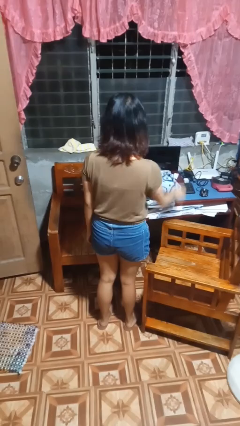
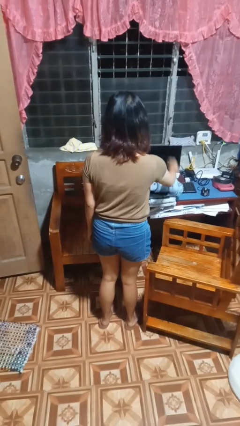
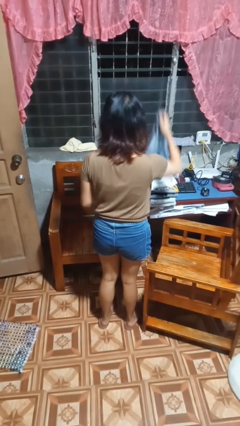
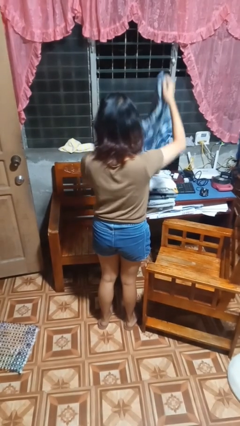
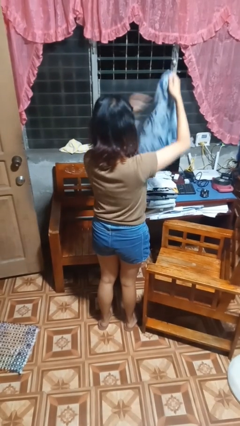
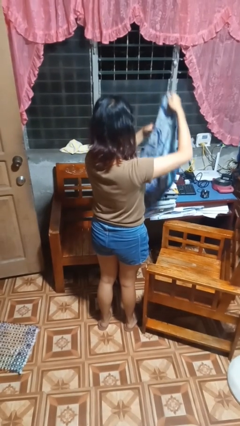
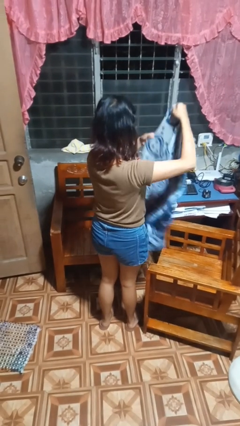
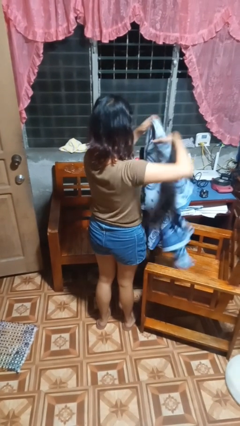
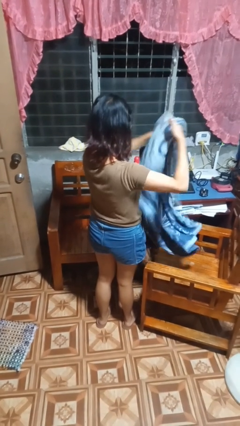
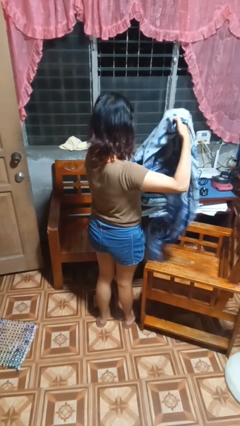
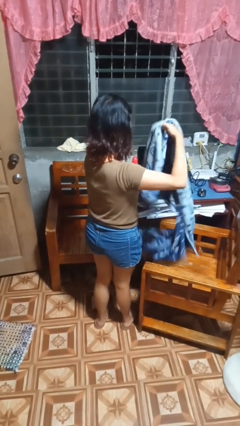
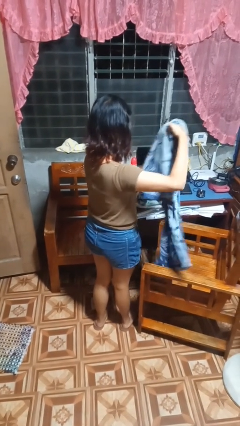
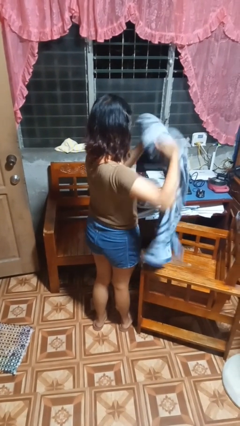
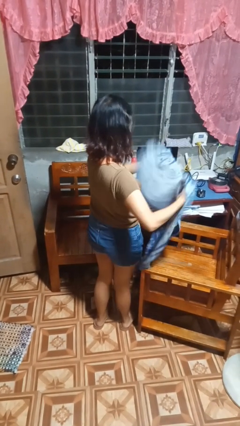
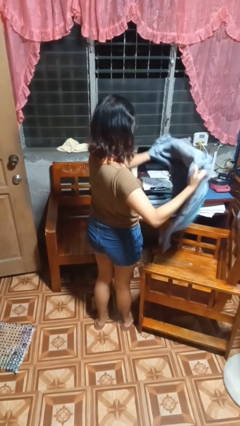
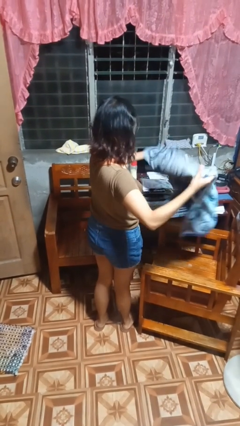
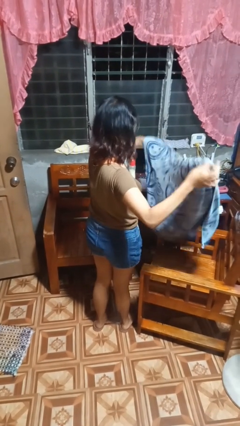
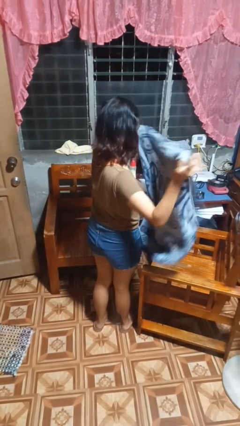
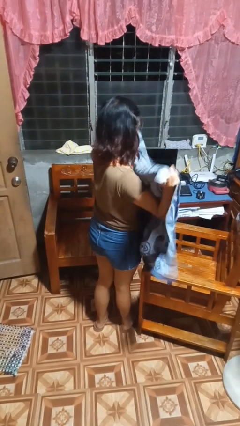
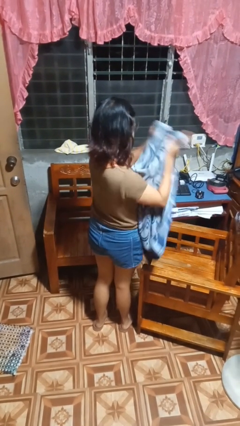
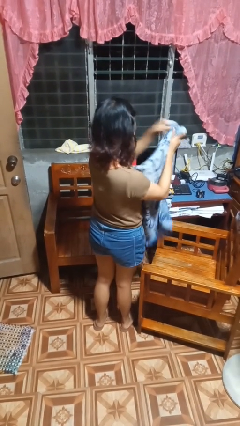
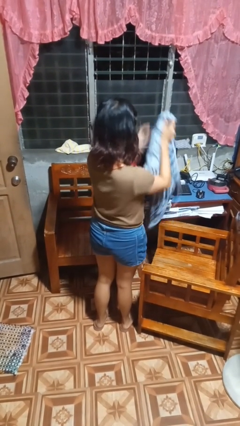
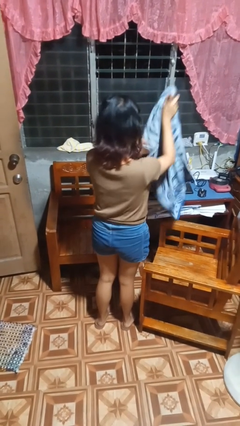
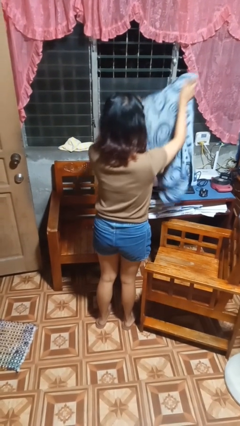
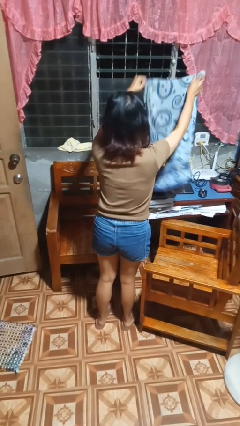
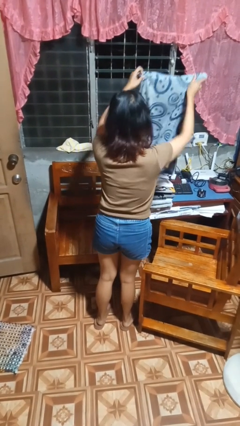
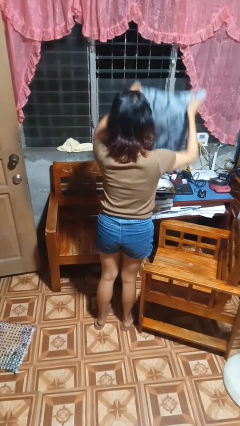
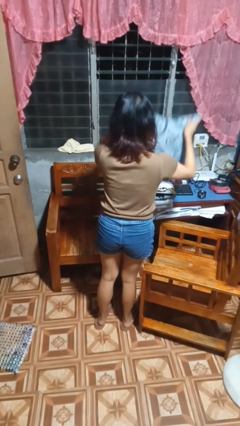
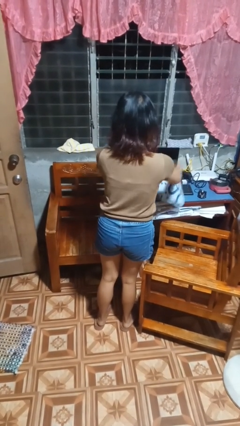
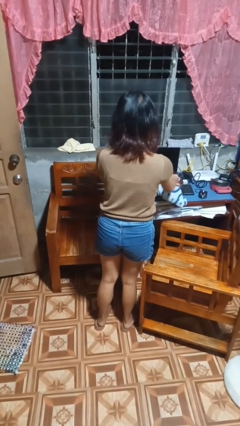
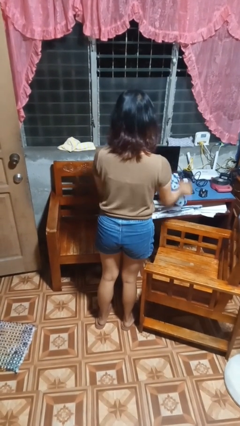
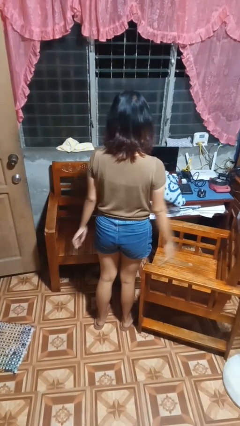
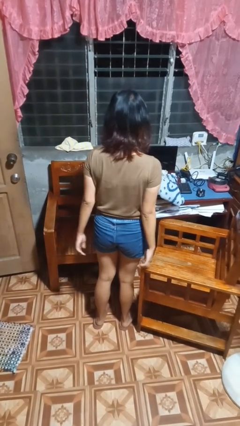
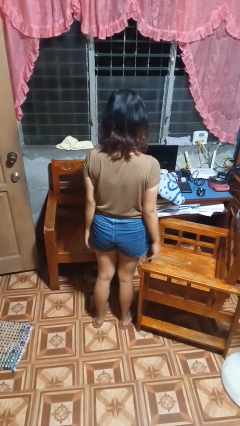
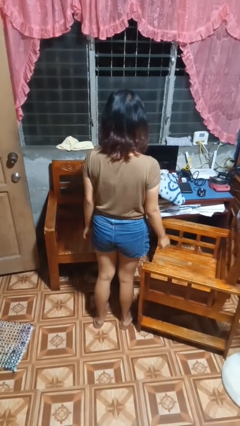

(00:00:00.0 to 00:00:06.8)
person folds towel

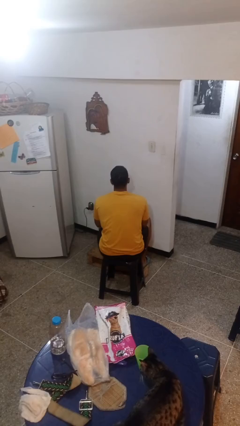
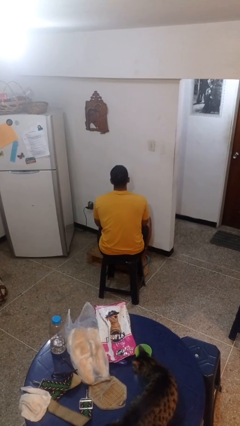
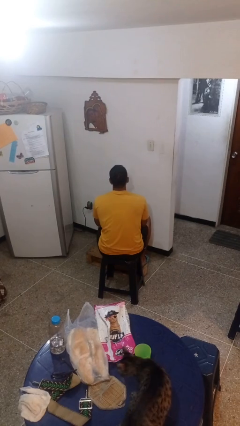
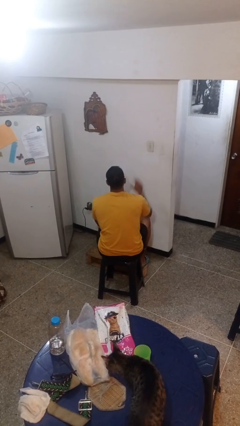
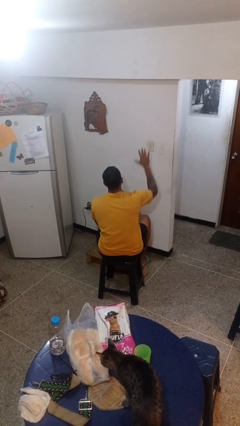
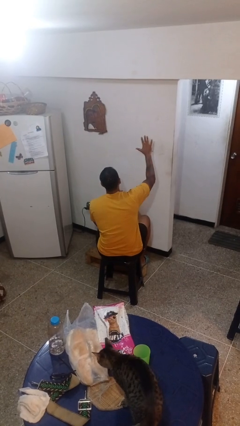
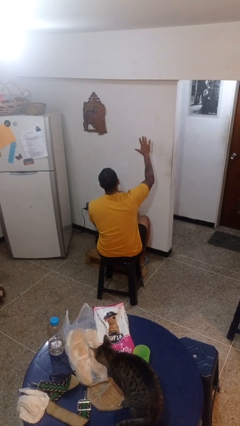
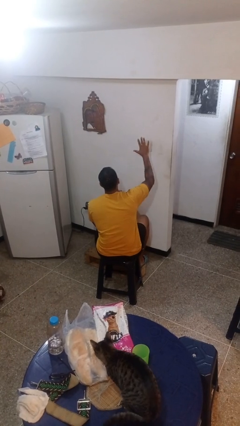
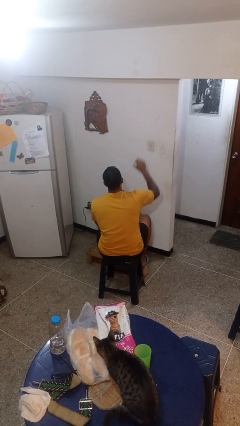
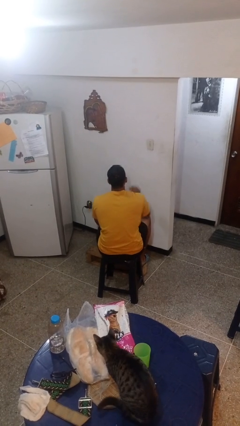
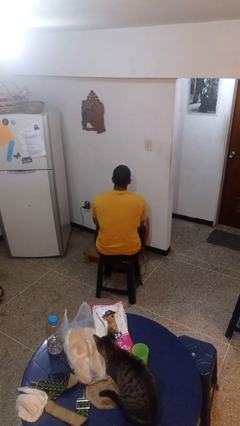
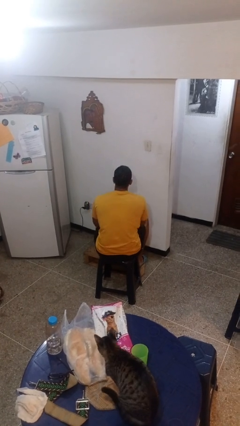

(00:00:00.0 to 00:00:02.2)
person gestures number five

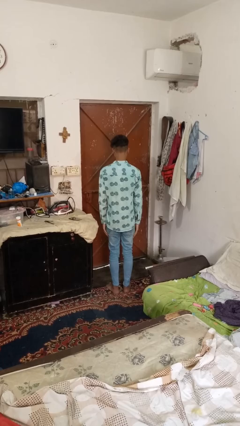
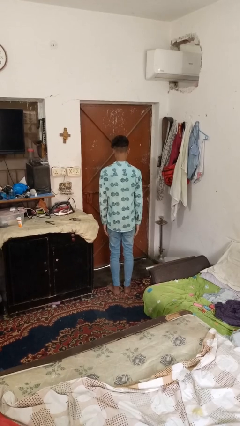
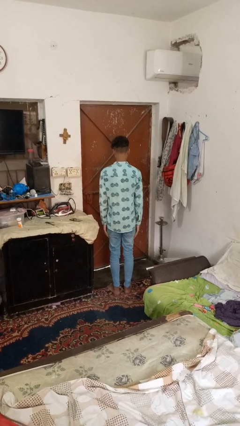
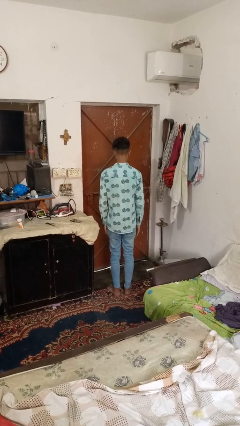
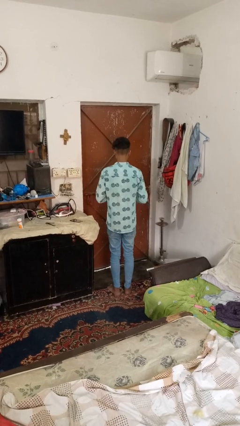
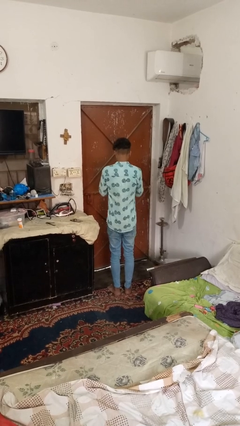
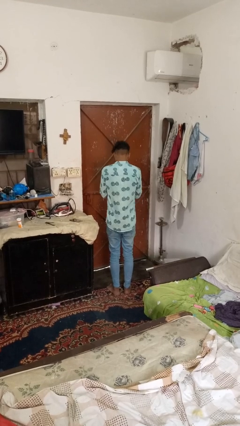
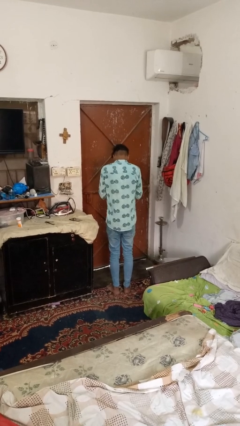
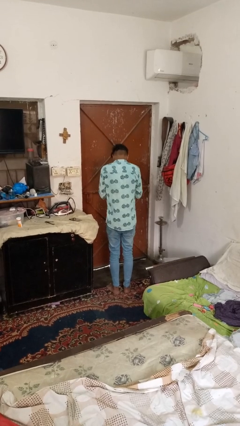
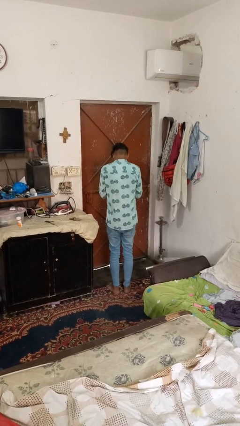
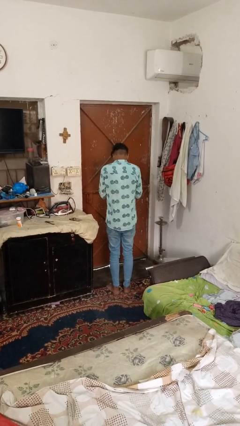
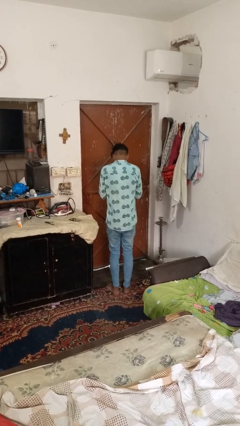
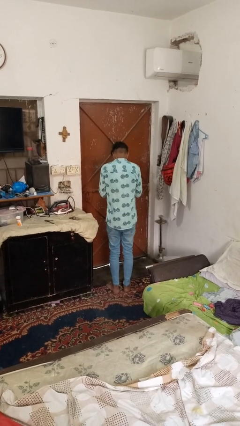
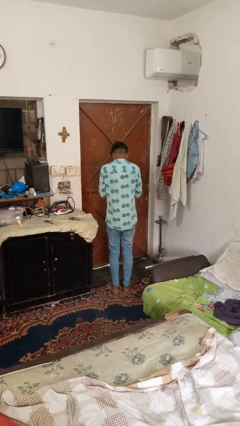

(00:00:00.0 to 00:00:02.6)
person sneezes into hand

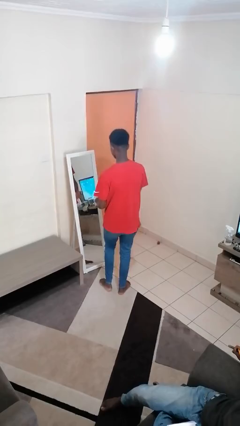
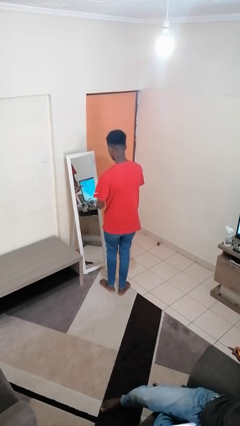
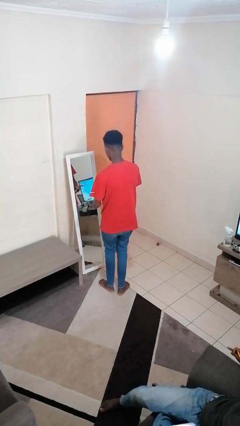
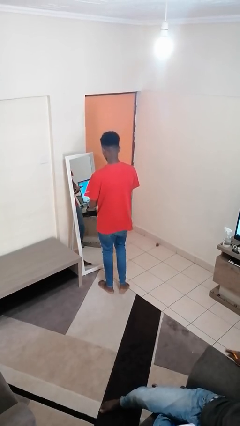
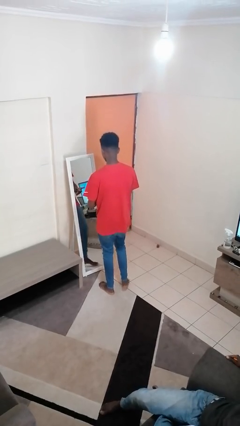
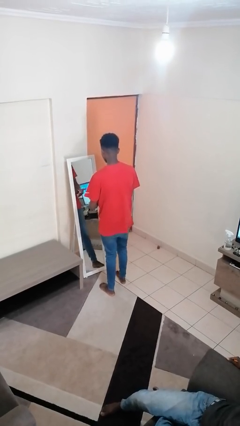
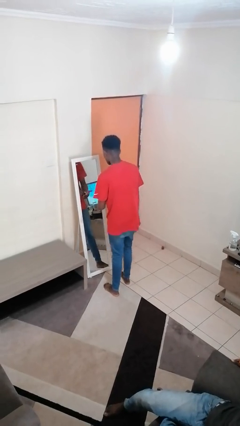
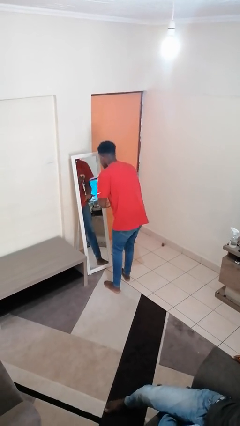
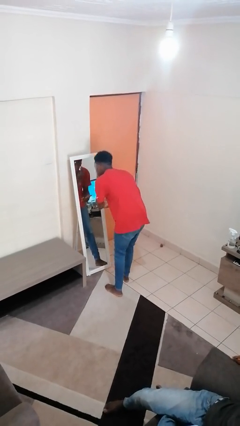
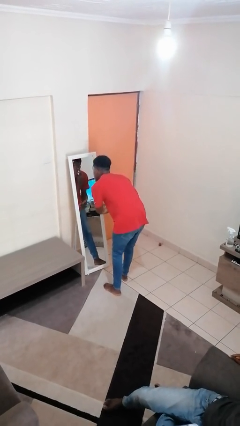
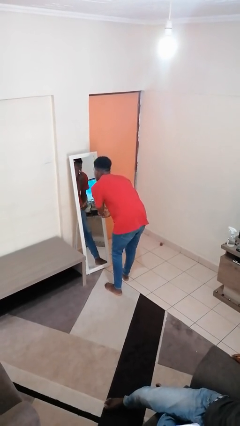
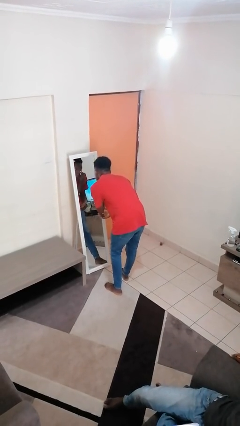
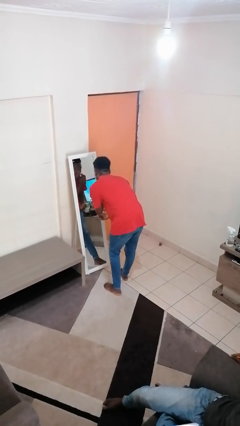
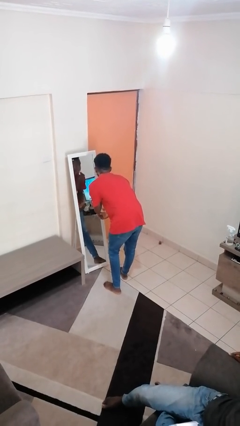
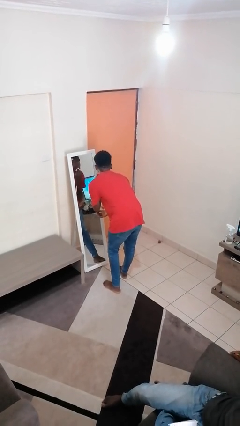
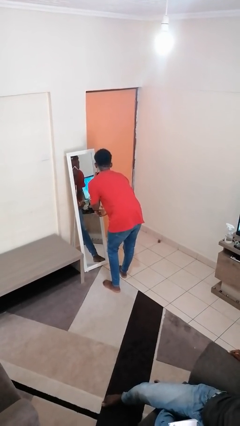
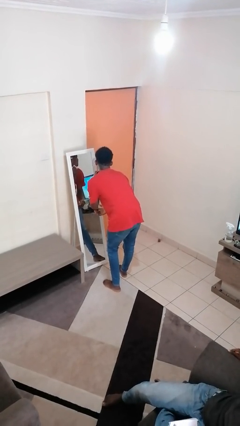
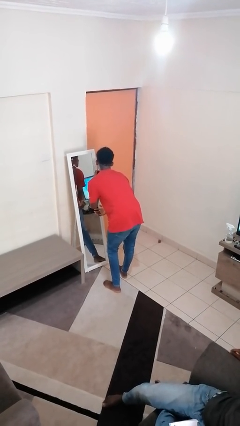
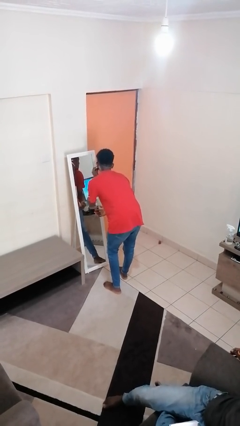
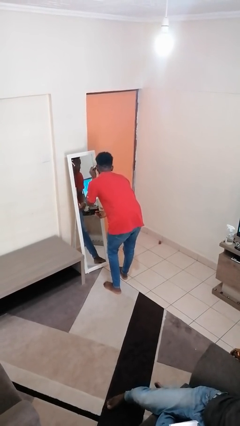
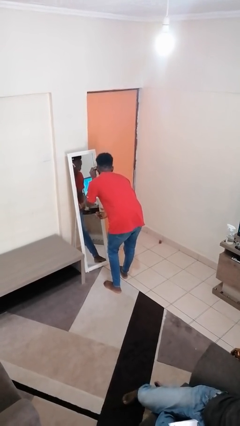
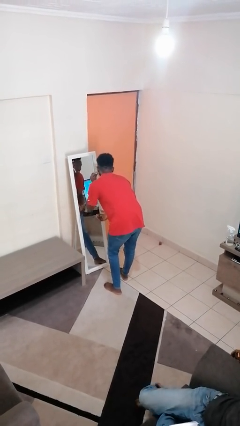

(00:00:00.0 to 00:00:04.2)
person applies foundation makeup

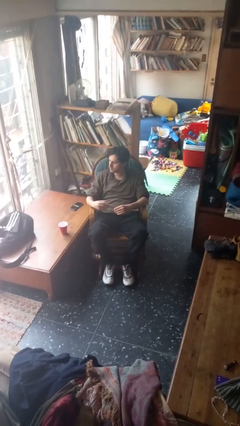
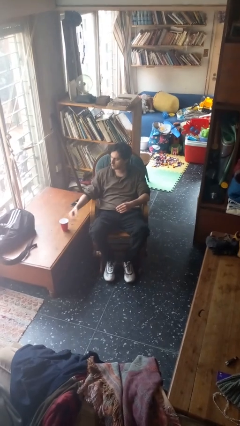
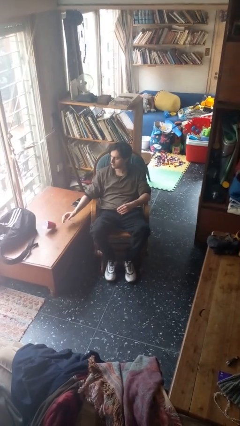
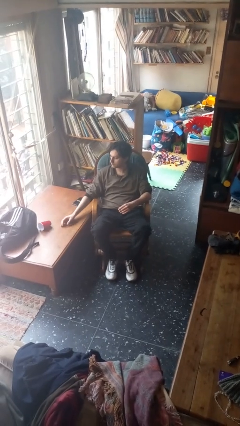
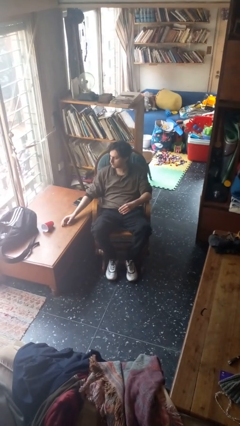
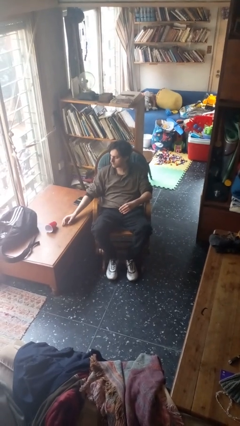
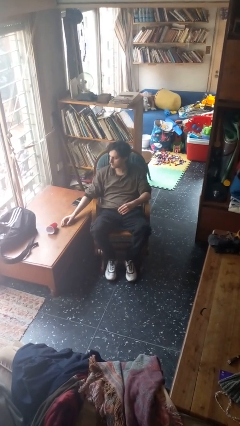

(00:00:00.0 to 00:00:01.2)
person knocks over glass

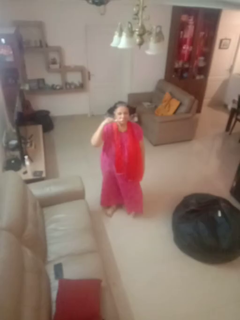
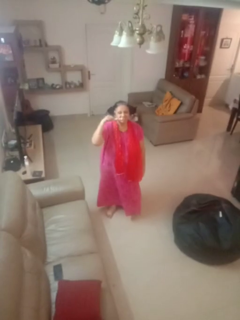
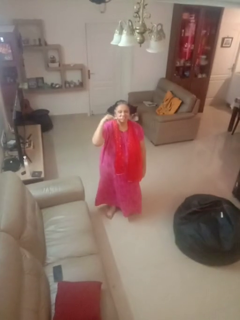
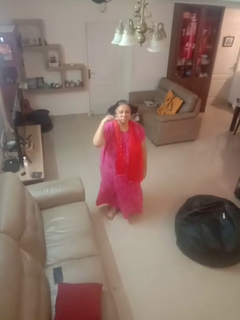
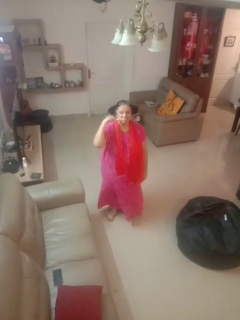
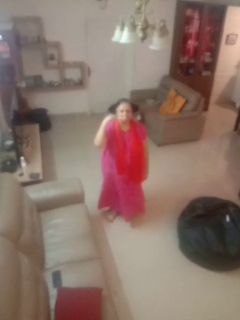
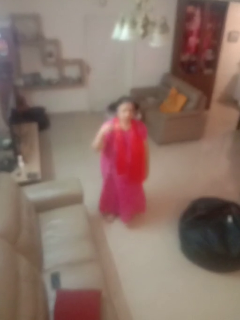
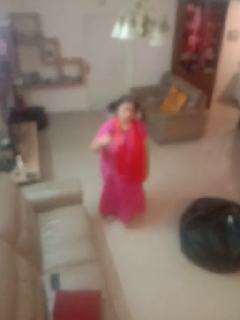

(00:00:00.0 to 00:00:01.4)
person brushes teeth
